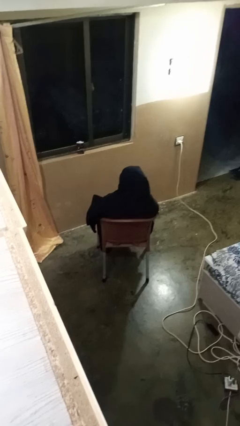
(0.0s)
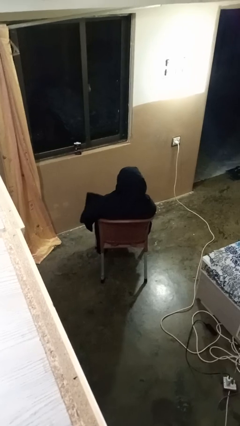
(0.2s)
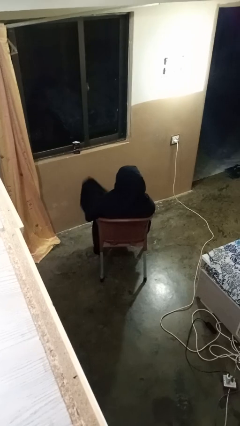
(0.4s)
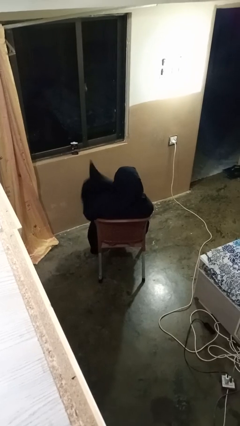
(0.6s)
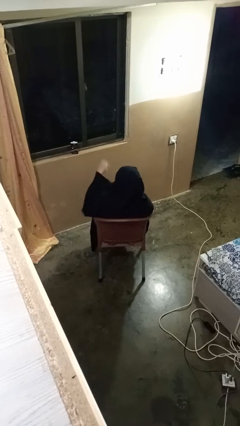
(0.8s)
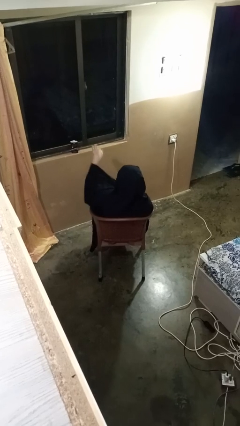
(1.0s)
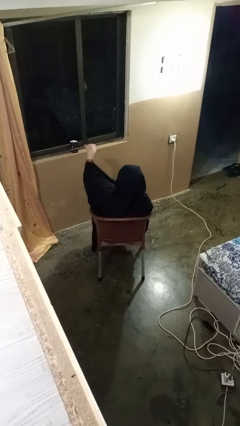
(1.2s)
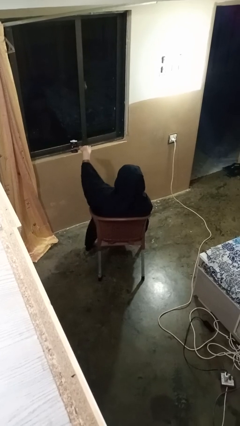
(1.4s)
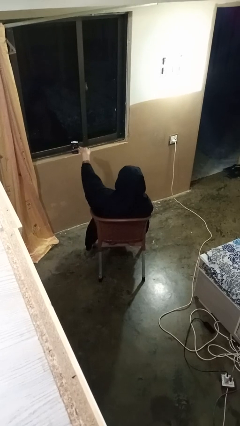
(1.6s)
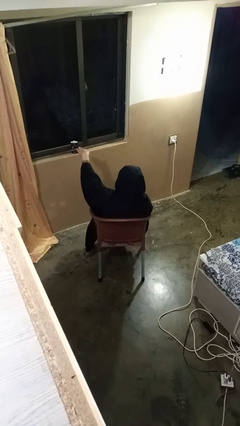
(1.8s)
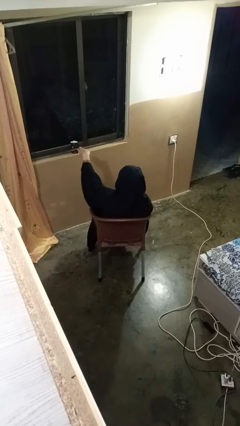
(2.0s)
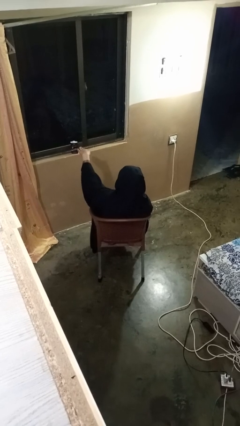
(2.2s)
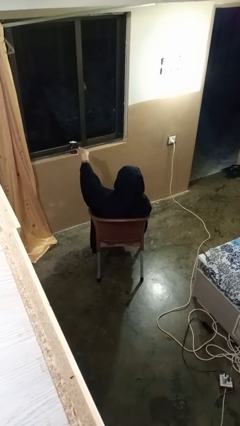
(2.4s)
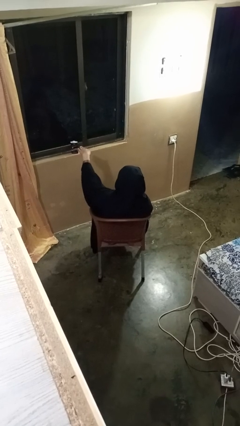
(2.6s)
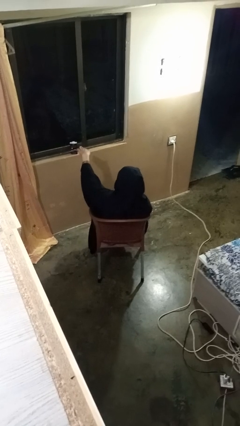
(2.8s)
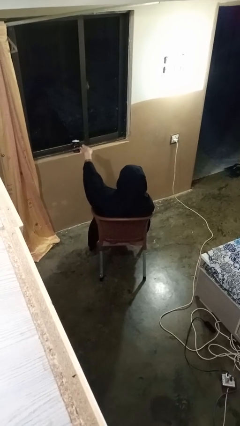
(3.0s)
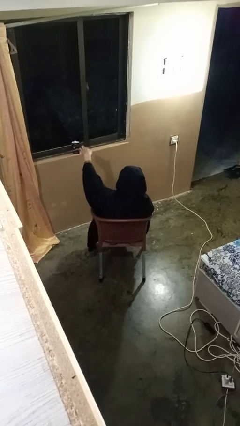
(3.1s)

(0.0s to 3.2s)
person gestures swipe up

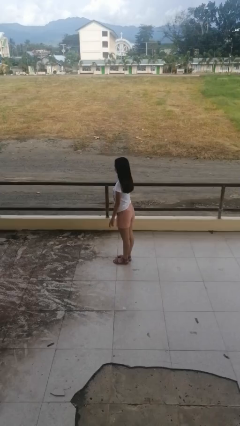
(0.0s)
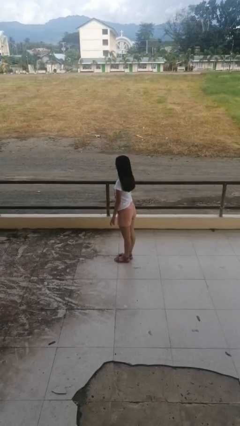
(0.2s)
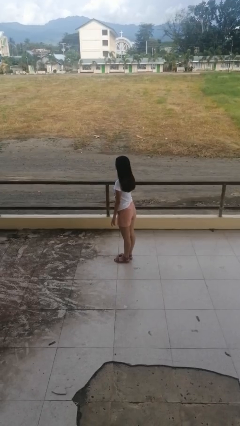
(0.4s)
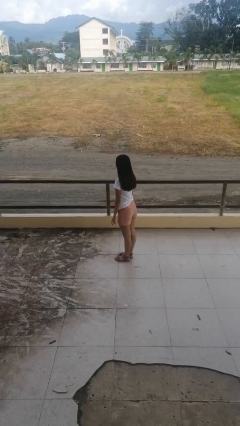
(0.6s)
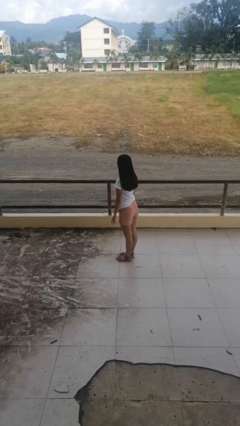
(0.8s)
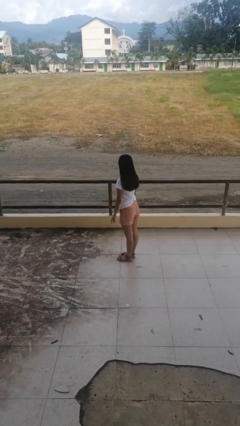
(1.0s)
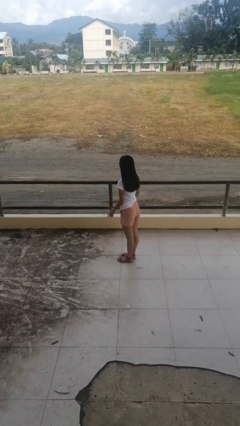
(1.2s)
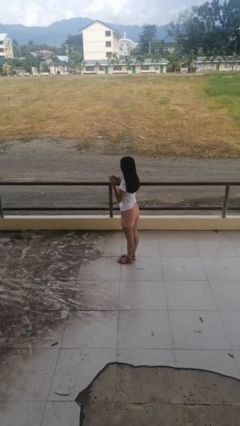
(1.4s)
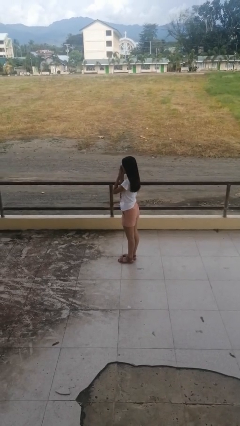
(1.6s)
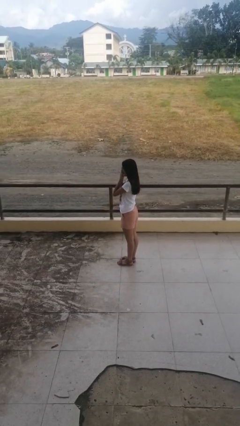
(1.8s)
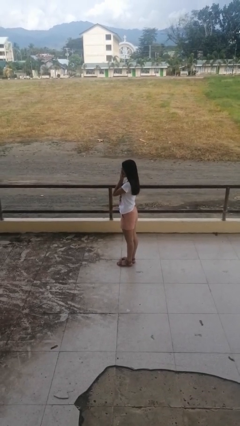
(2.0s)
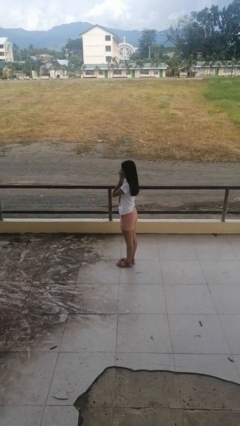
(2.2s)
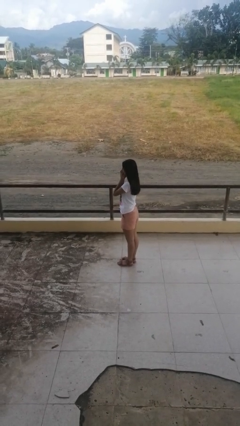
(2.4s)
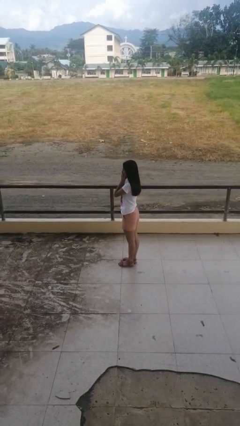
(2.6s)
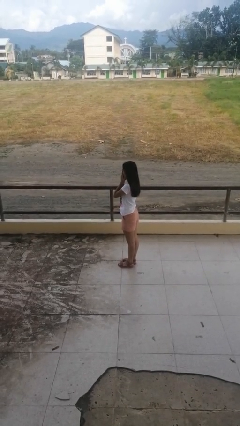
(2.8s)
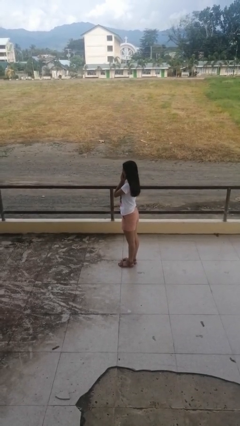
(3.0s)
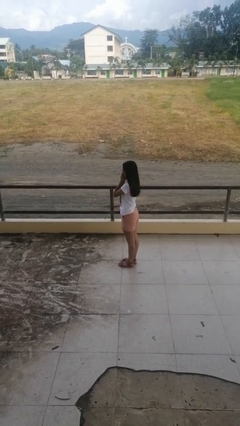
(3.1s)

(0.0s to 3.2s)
person rubs eyes

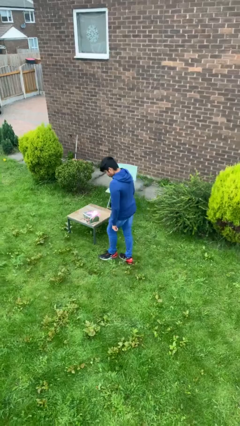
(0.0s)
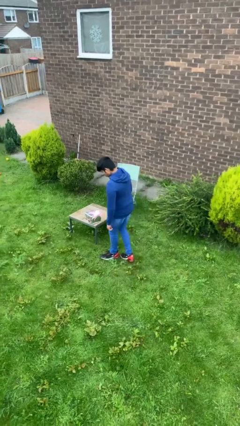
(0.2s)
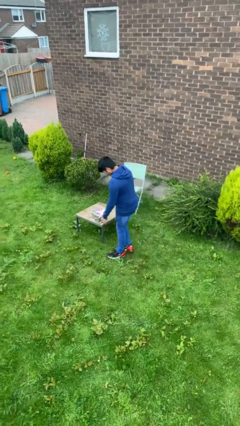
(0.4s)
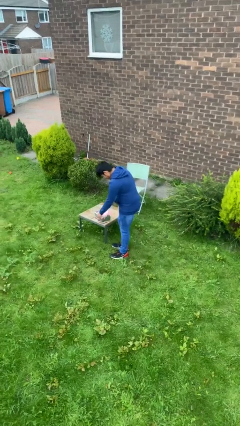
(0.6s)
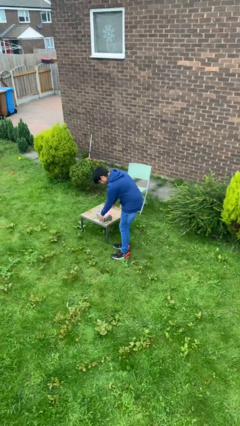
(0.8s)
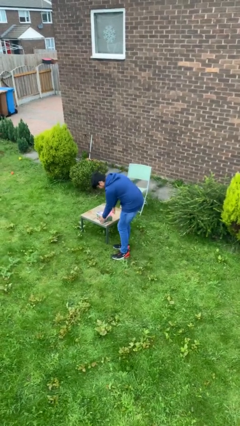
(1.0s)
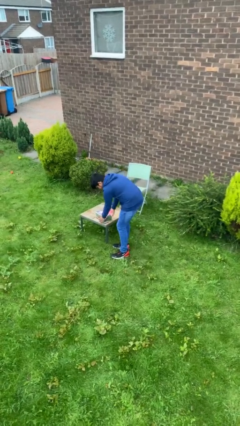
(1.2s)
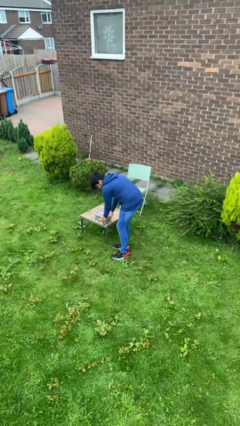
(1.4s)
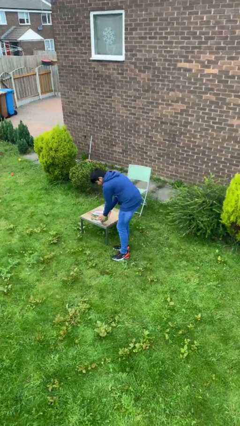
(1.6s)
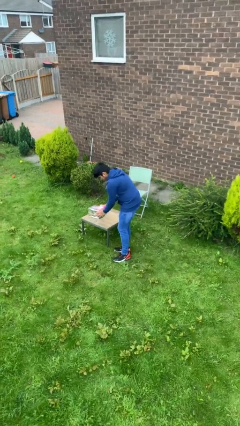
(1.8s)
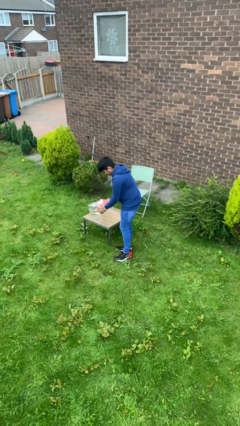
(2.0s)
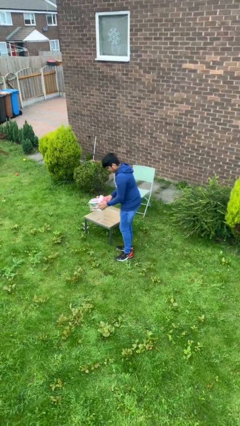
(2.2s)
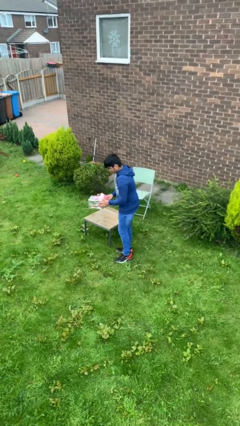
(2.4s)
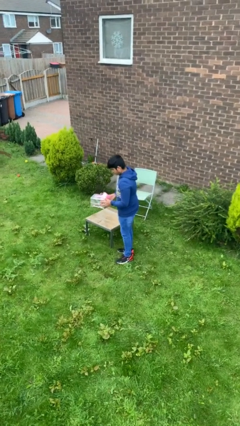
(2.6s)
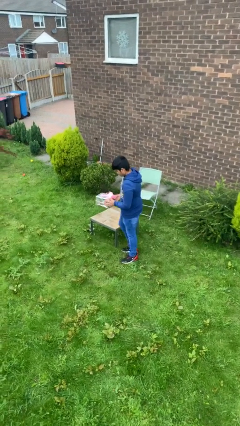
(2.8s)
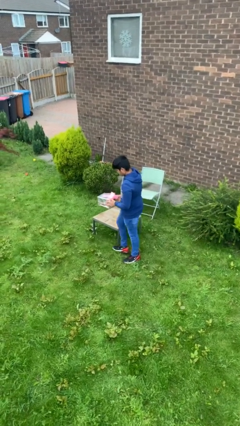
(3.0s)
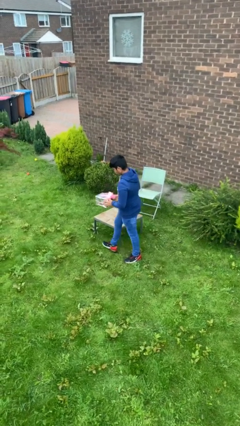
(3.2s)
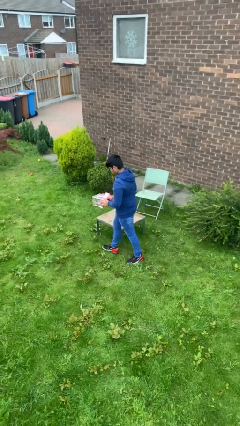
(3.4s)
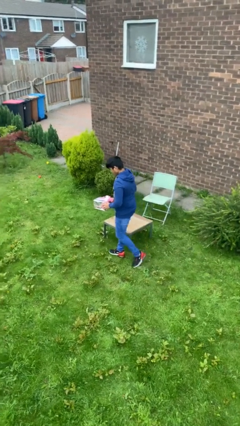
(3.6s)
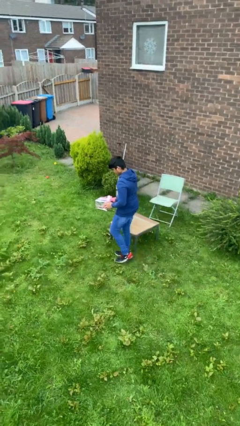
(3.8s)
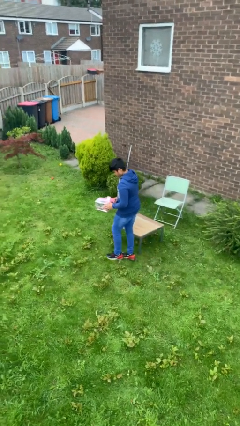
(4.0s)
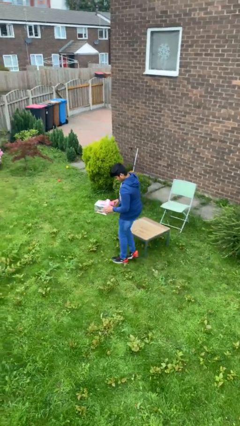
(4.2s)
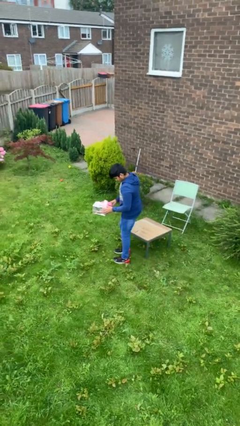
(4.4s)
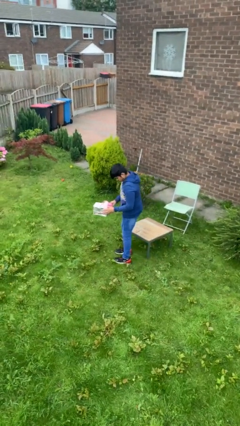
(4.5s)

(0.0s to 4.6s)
person picks up object from table

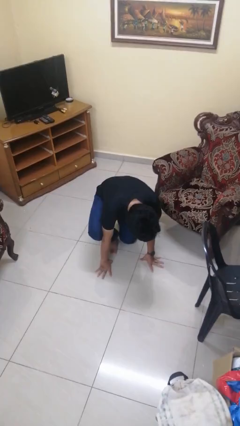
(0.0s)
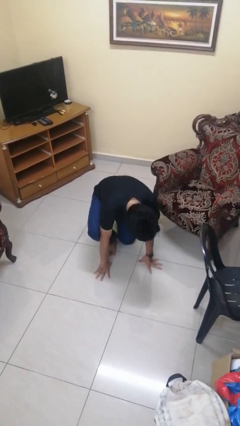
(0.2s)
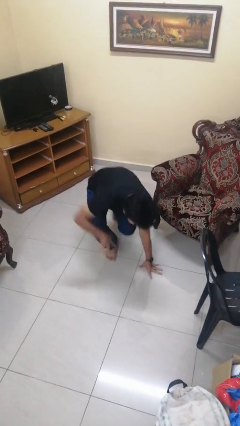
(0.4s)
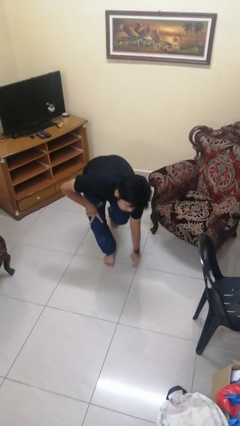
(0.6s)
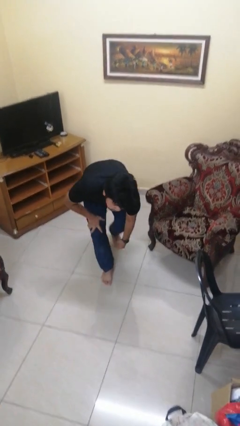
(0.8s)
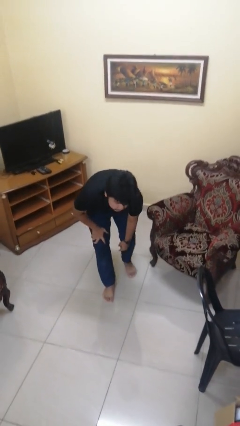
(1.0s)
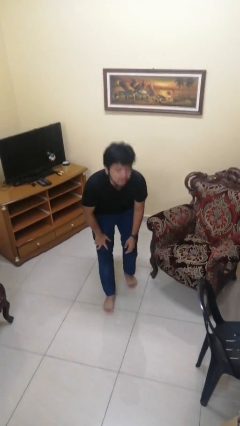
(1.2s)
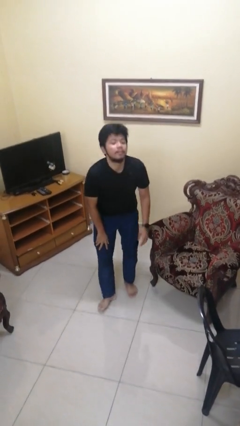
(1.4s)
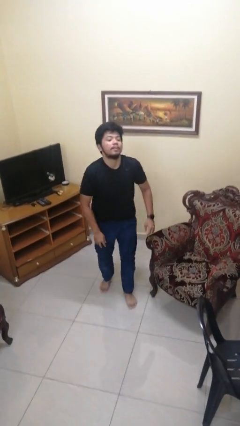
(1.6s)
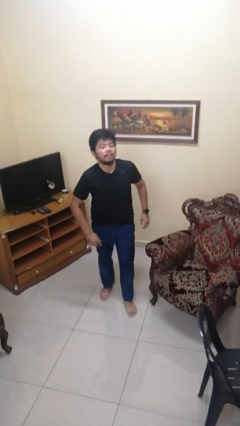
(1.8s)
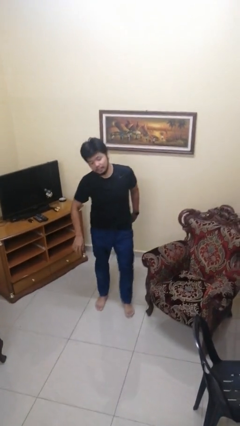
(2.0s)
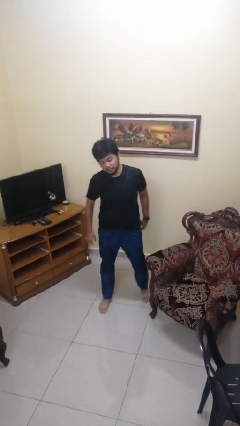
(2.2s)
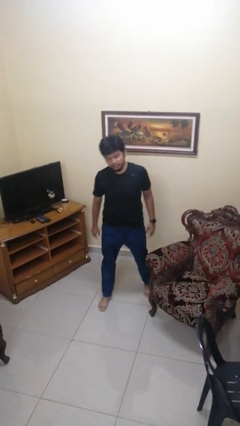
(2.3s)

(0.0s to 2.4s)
person stands up from floor

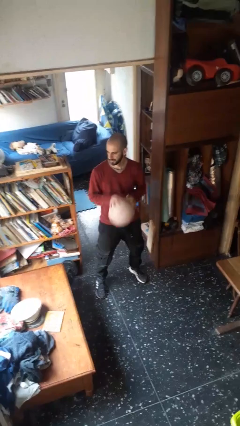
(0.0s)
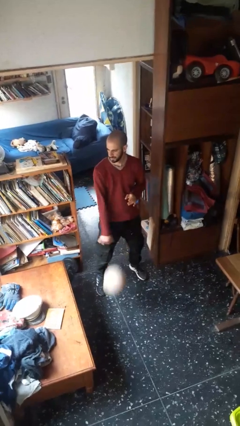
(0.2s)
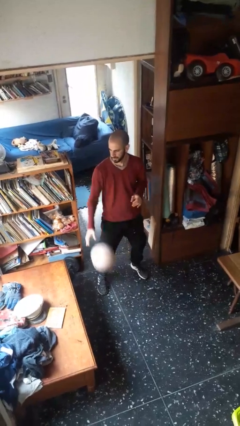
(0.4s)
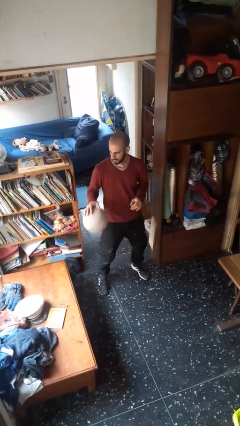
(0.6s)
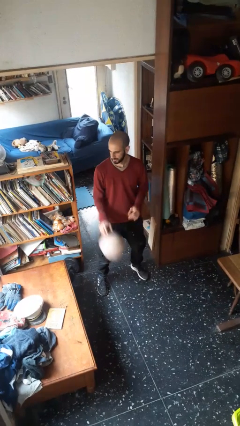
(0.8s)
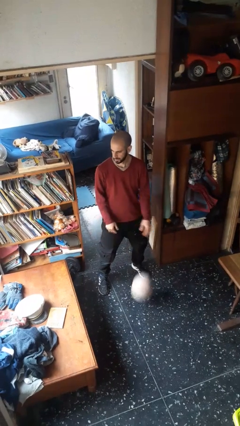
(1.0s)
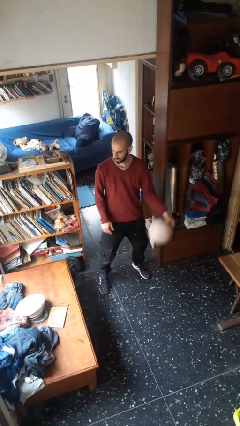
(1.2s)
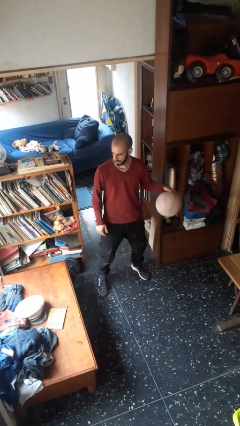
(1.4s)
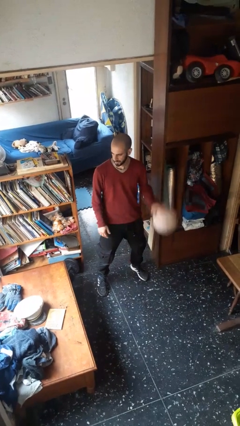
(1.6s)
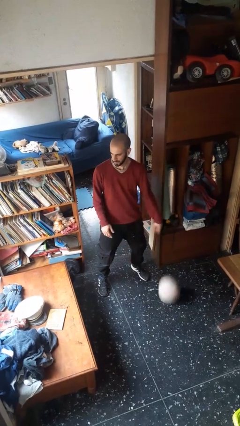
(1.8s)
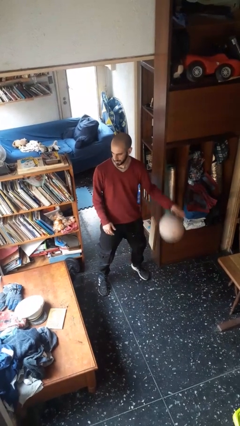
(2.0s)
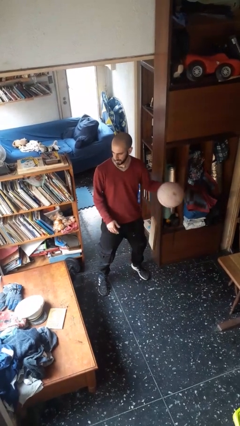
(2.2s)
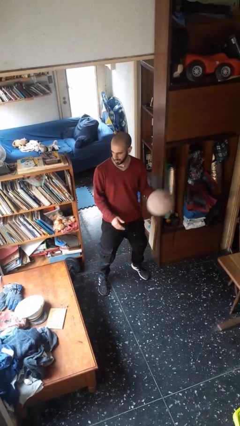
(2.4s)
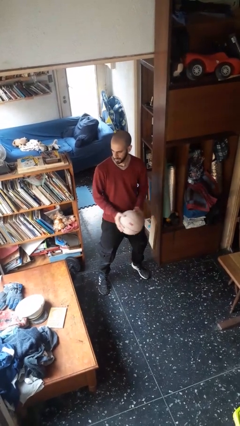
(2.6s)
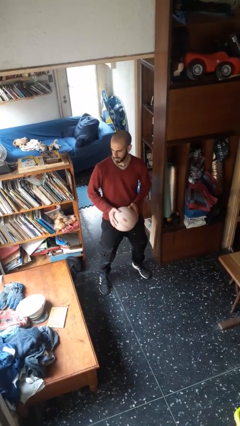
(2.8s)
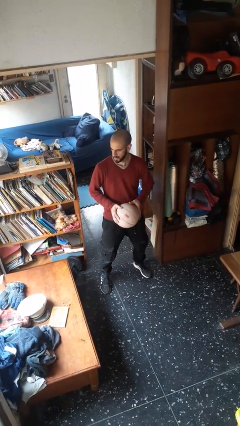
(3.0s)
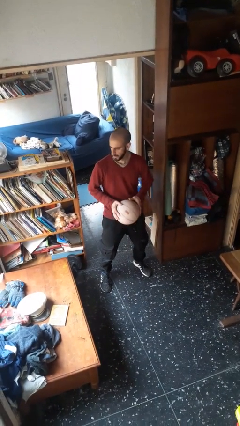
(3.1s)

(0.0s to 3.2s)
person bounces ball on floor

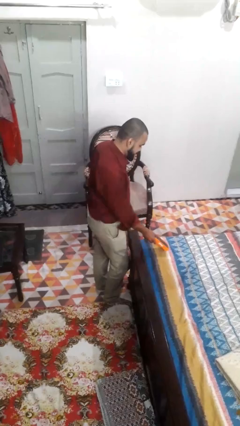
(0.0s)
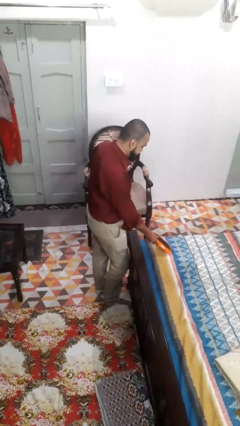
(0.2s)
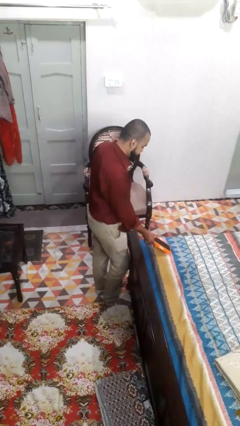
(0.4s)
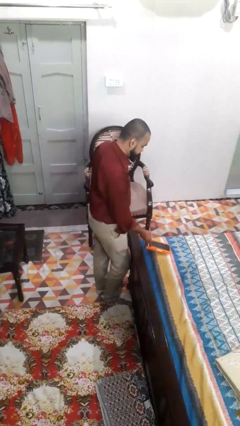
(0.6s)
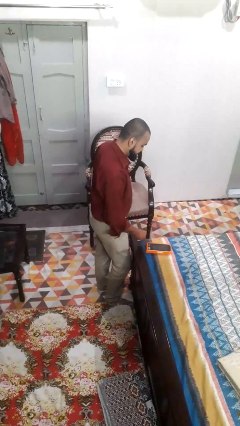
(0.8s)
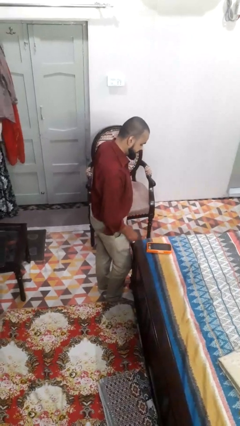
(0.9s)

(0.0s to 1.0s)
person puts down object on bed
